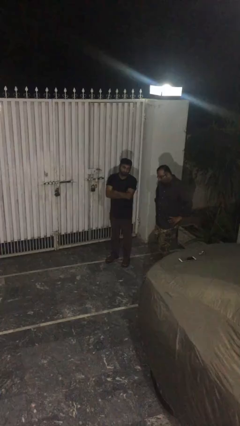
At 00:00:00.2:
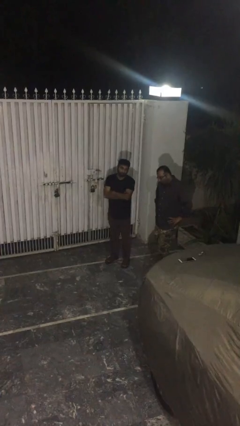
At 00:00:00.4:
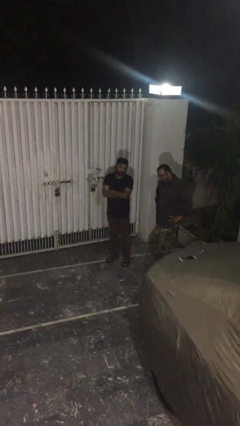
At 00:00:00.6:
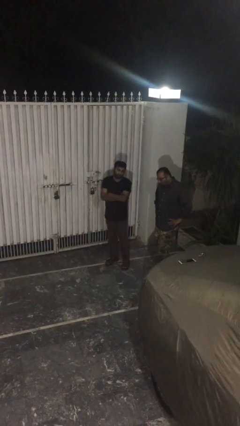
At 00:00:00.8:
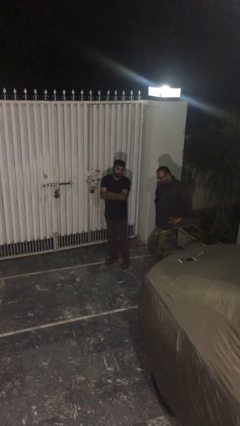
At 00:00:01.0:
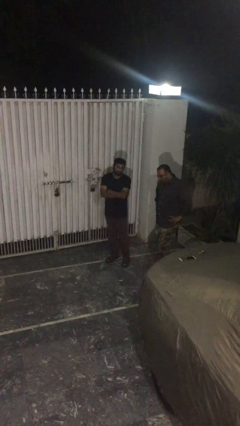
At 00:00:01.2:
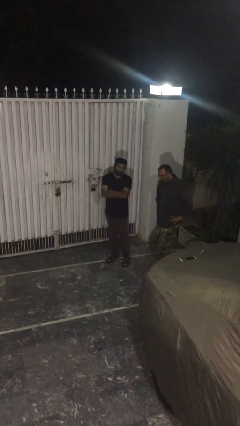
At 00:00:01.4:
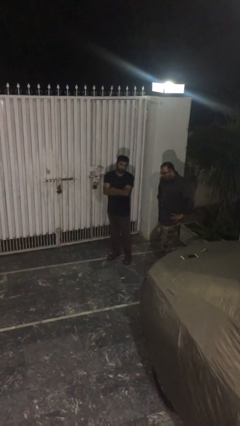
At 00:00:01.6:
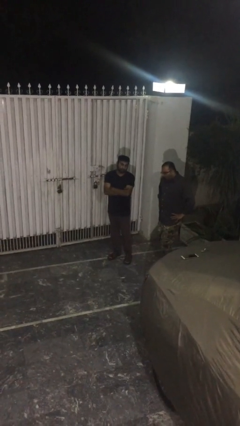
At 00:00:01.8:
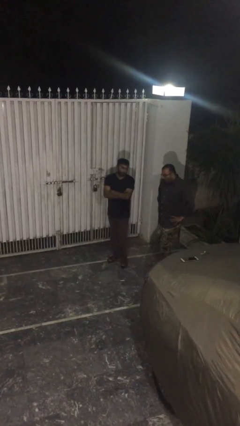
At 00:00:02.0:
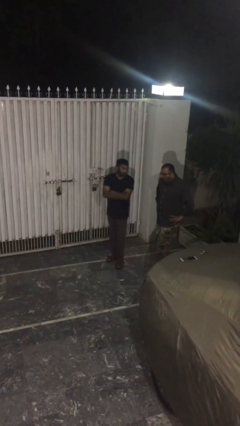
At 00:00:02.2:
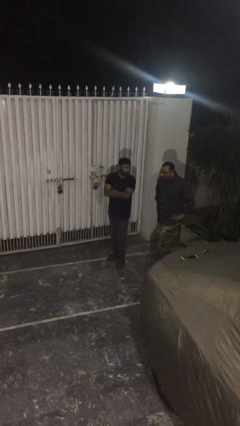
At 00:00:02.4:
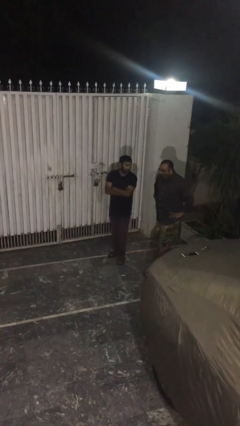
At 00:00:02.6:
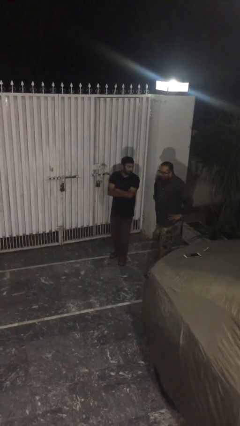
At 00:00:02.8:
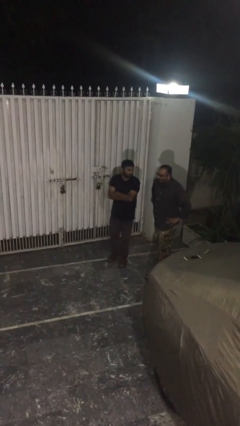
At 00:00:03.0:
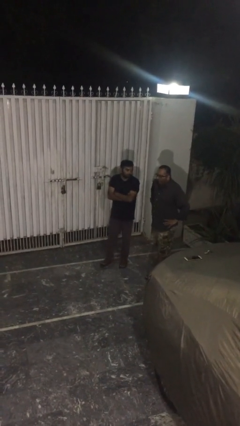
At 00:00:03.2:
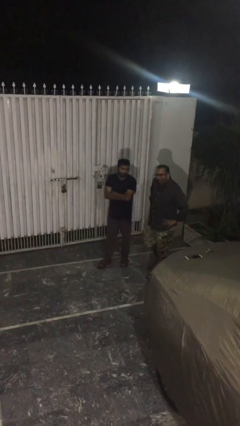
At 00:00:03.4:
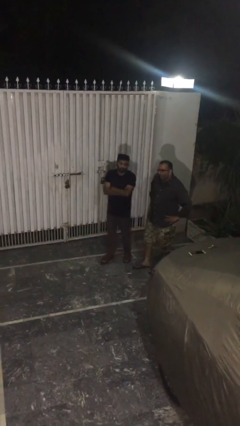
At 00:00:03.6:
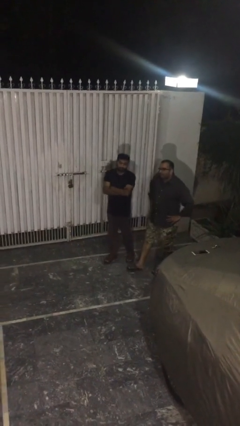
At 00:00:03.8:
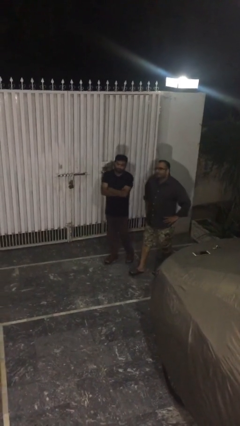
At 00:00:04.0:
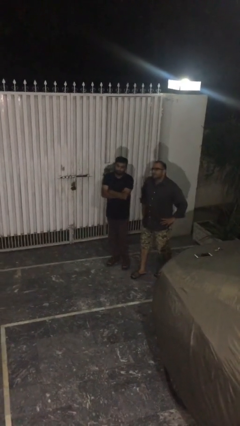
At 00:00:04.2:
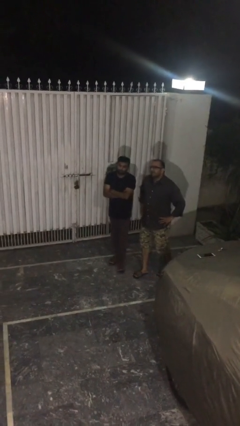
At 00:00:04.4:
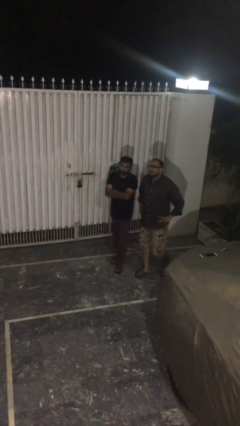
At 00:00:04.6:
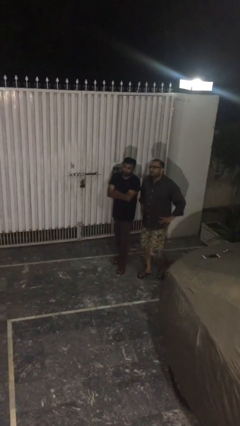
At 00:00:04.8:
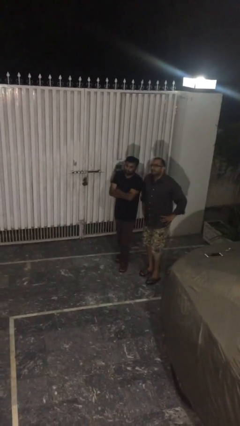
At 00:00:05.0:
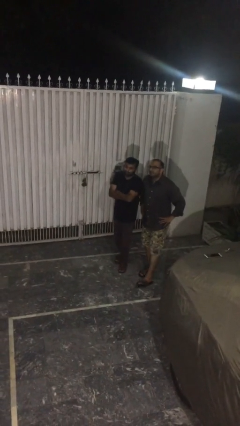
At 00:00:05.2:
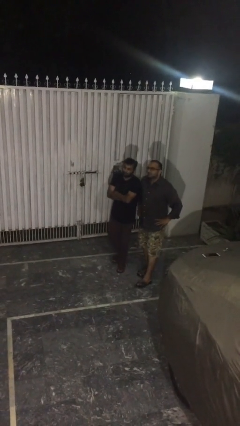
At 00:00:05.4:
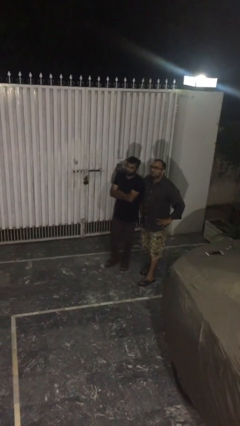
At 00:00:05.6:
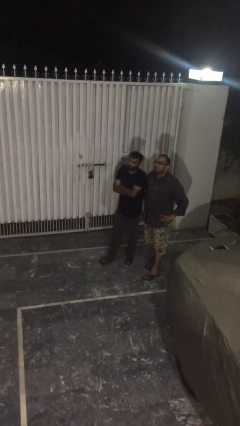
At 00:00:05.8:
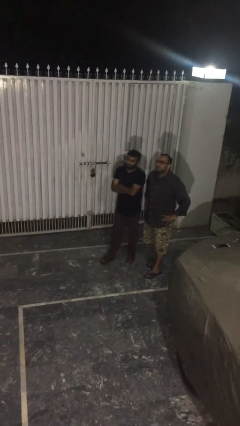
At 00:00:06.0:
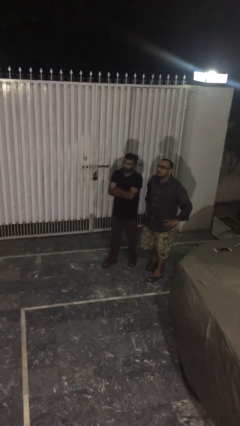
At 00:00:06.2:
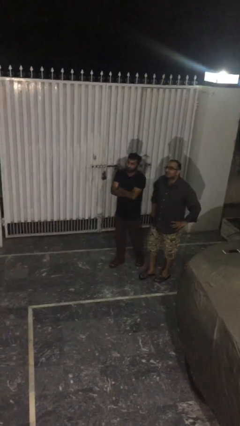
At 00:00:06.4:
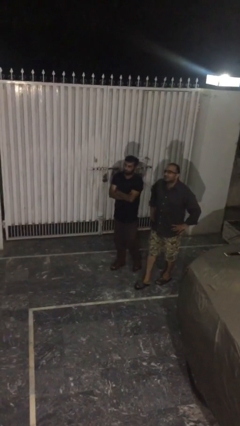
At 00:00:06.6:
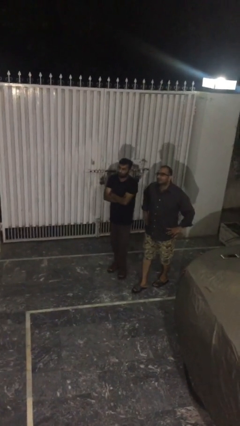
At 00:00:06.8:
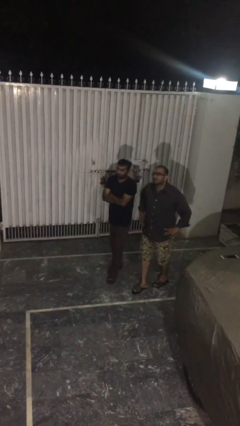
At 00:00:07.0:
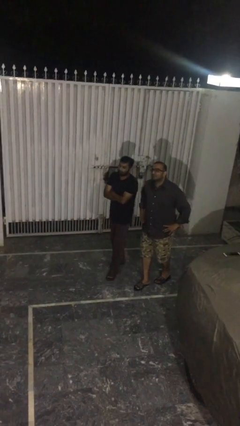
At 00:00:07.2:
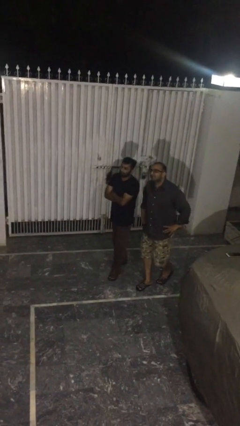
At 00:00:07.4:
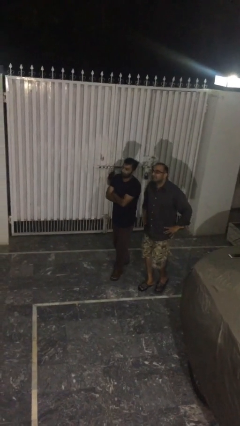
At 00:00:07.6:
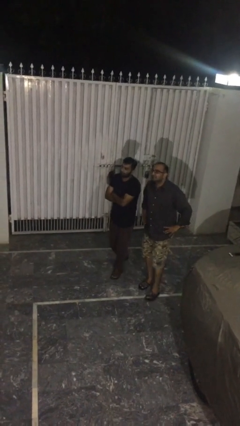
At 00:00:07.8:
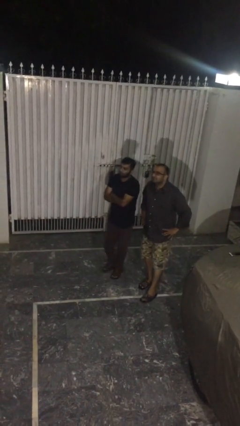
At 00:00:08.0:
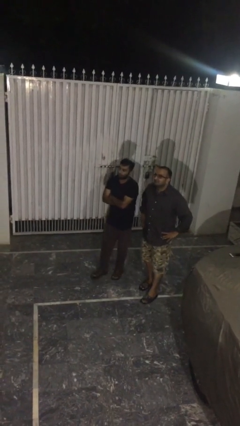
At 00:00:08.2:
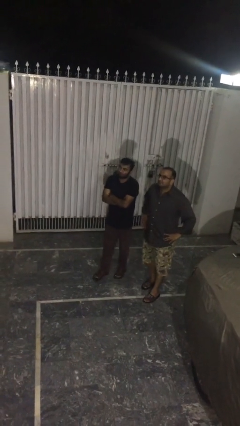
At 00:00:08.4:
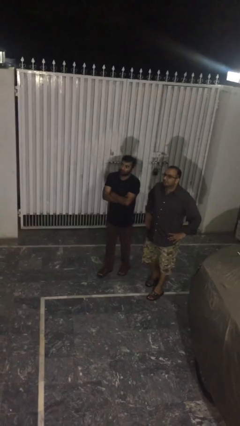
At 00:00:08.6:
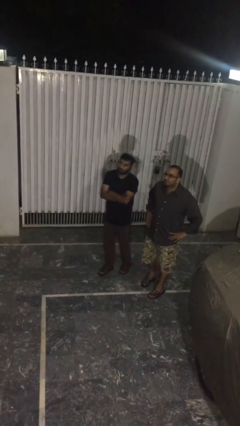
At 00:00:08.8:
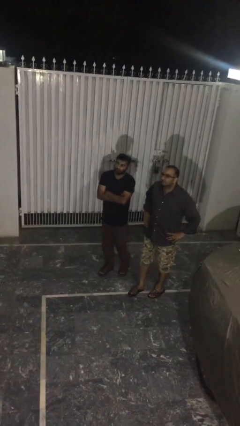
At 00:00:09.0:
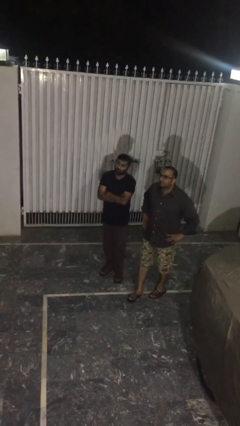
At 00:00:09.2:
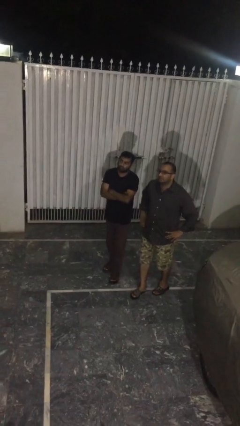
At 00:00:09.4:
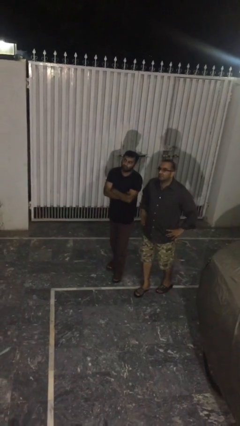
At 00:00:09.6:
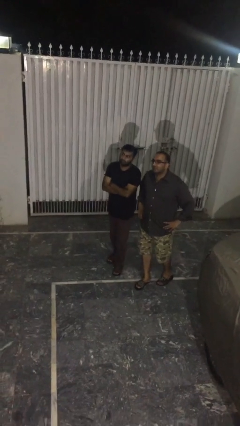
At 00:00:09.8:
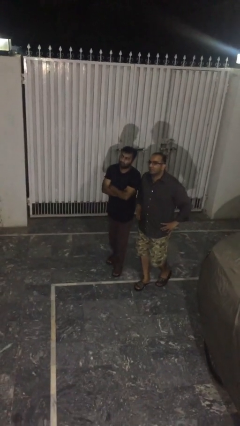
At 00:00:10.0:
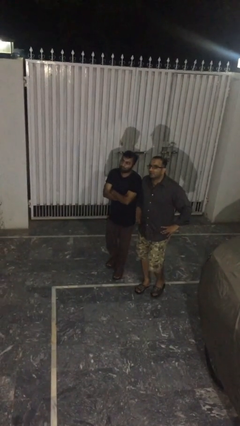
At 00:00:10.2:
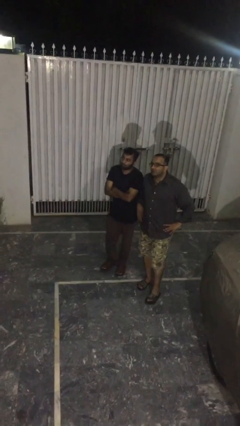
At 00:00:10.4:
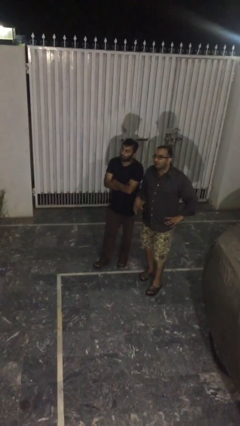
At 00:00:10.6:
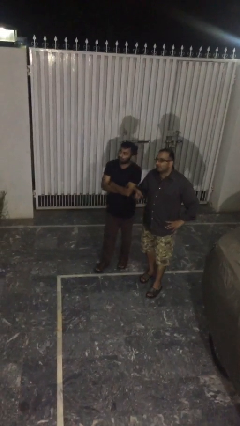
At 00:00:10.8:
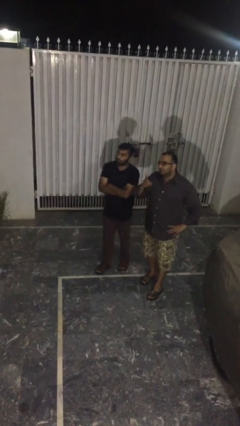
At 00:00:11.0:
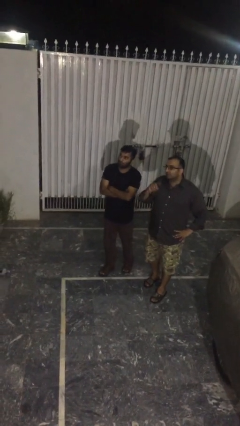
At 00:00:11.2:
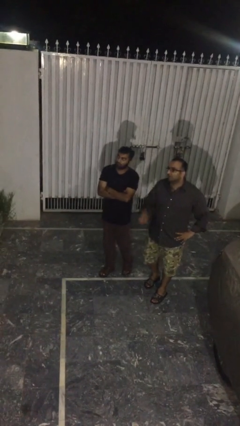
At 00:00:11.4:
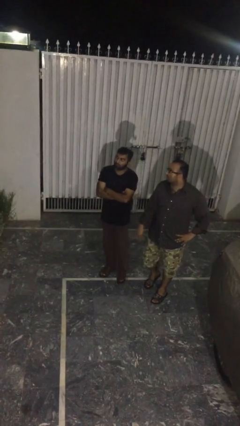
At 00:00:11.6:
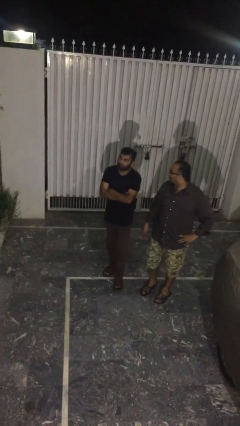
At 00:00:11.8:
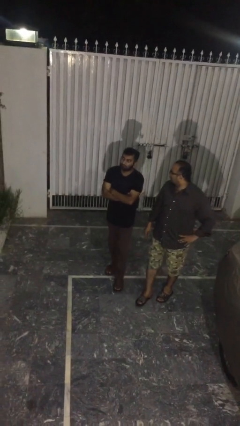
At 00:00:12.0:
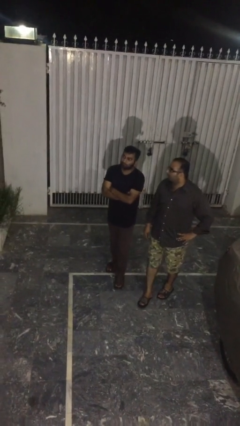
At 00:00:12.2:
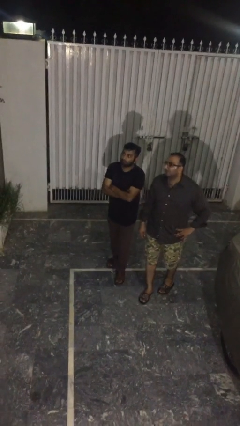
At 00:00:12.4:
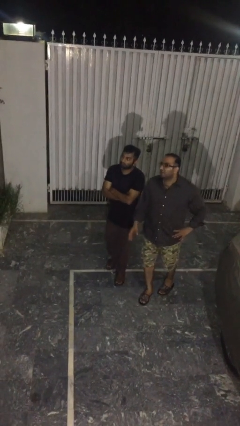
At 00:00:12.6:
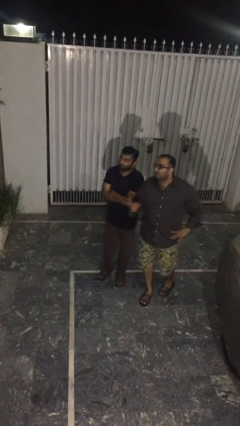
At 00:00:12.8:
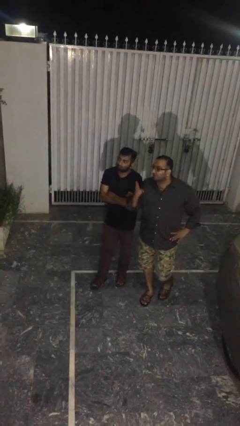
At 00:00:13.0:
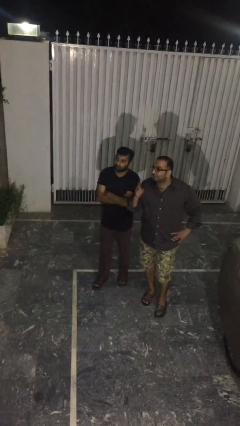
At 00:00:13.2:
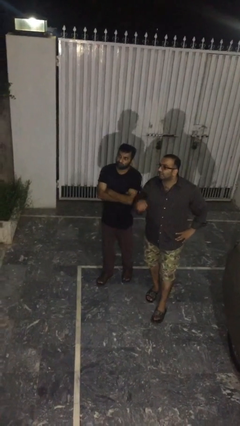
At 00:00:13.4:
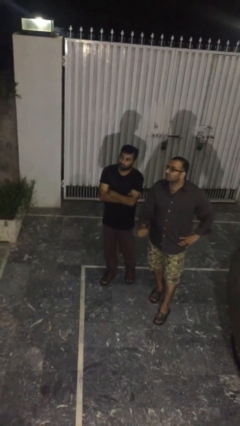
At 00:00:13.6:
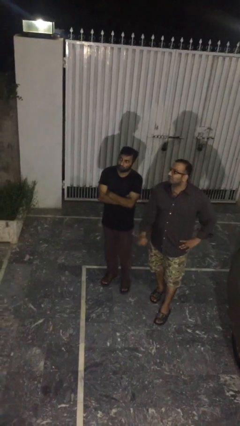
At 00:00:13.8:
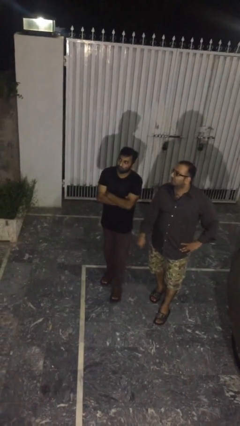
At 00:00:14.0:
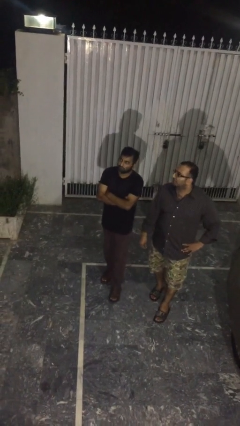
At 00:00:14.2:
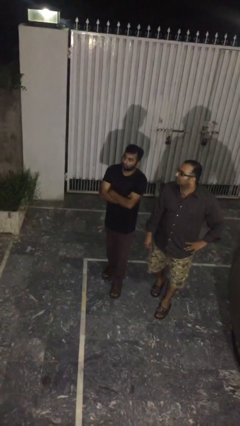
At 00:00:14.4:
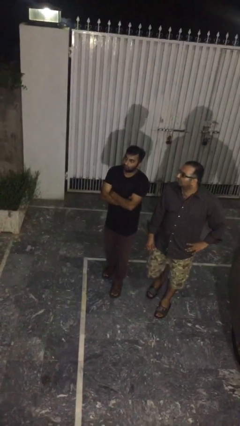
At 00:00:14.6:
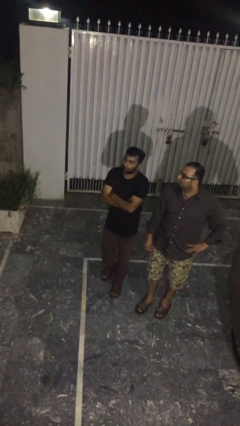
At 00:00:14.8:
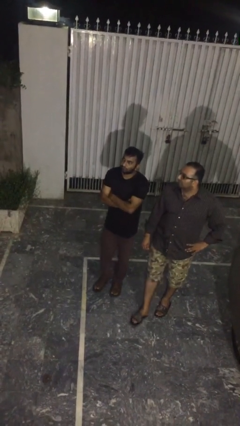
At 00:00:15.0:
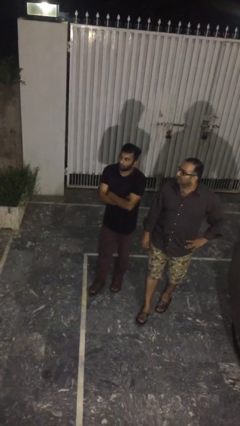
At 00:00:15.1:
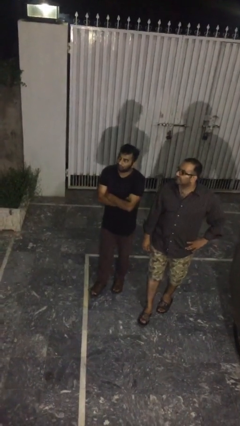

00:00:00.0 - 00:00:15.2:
person talks to person

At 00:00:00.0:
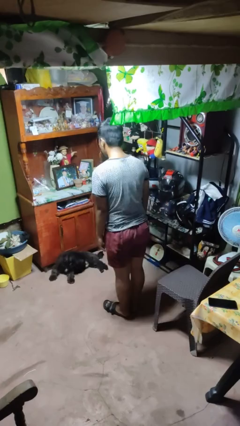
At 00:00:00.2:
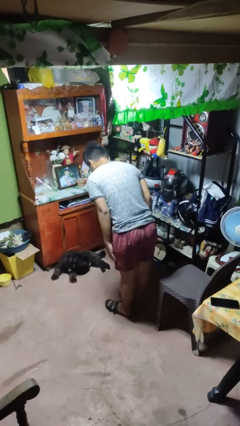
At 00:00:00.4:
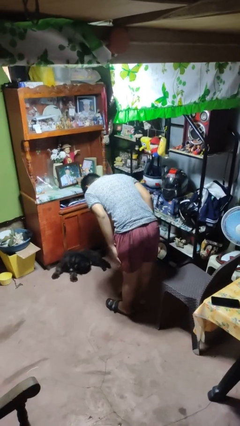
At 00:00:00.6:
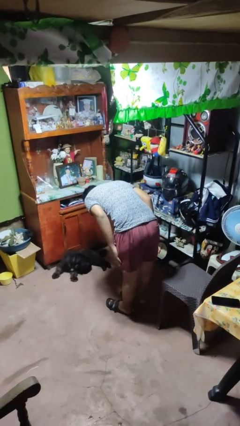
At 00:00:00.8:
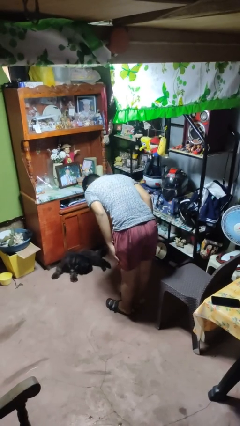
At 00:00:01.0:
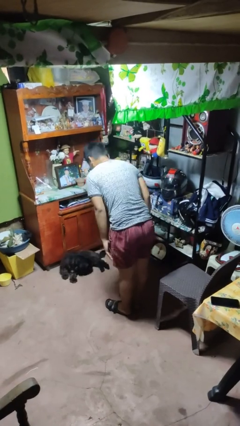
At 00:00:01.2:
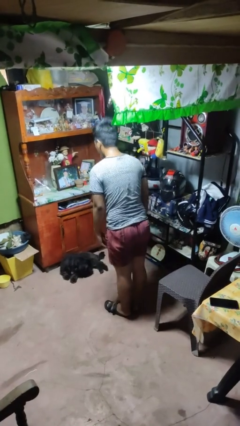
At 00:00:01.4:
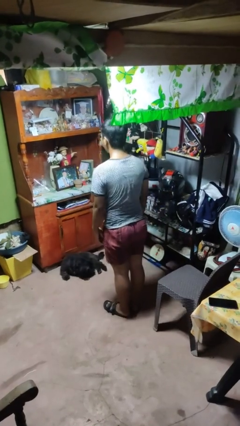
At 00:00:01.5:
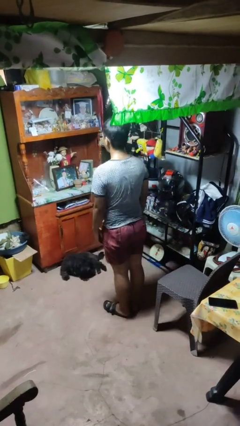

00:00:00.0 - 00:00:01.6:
person bows

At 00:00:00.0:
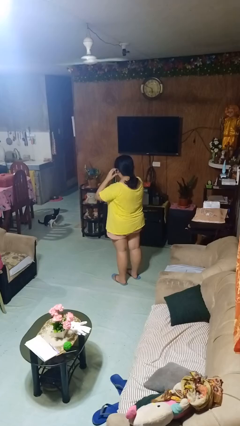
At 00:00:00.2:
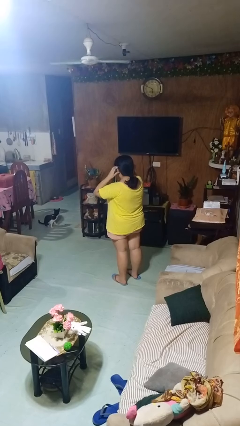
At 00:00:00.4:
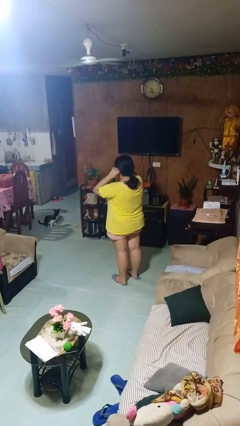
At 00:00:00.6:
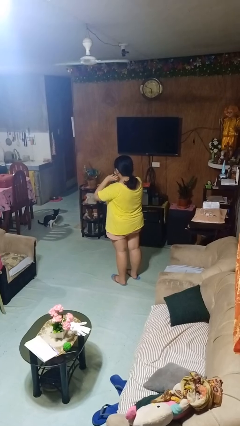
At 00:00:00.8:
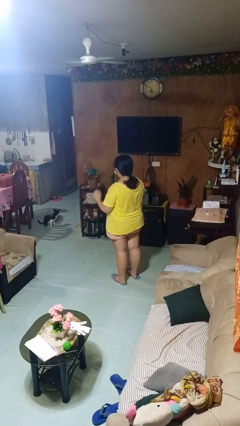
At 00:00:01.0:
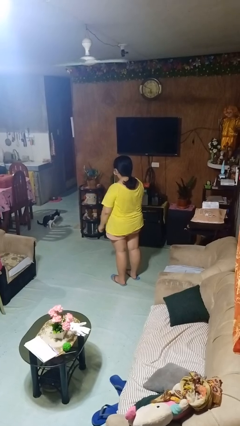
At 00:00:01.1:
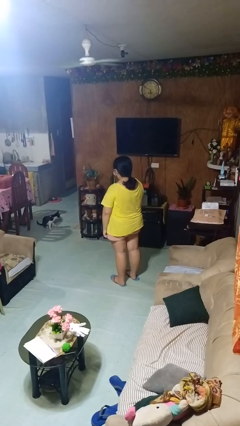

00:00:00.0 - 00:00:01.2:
person puts on facemask
